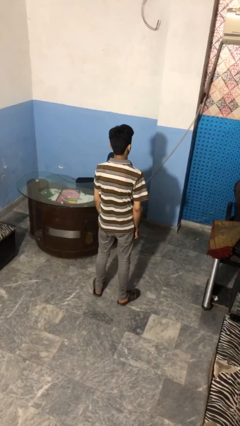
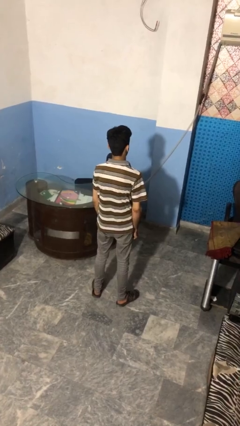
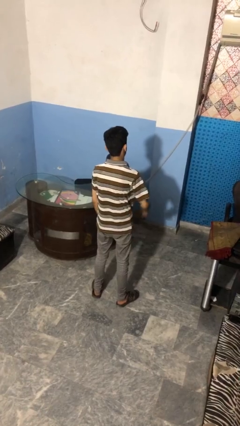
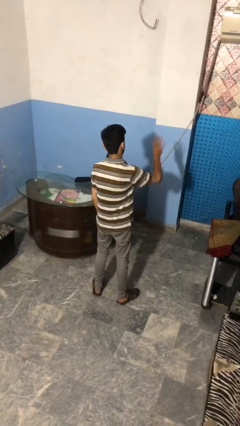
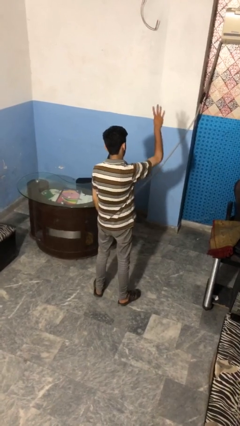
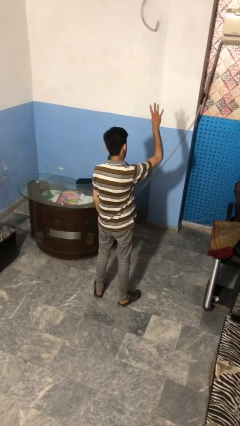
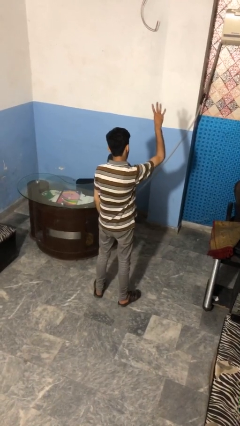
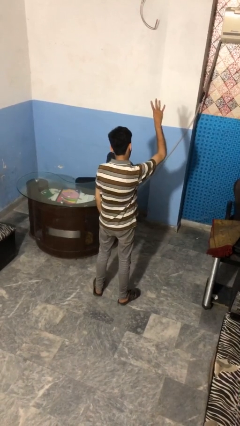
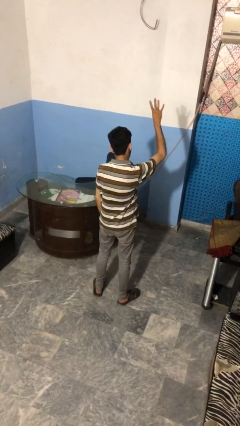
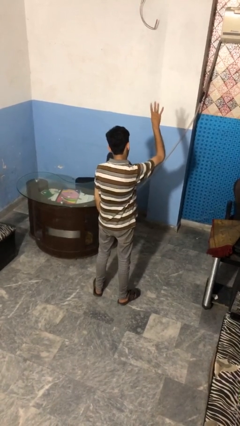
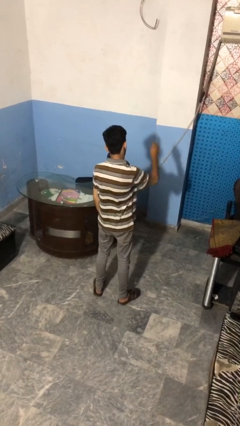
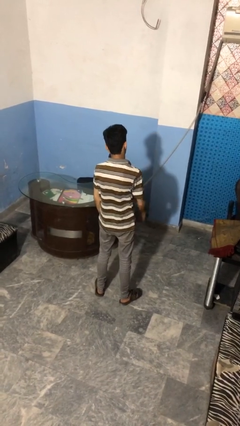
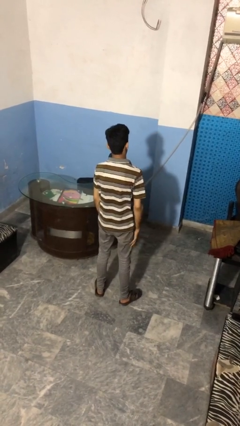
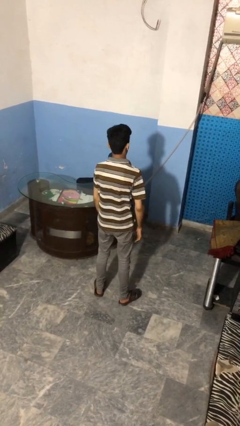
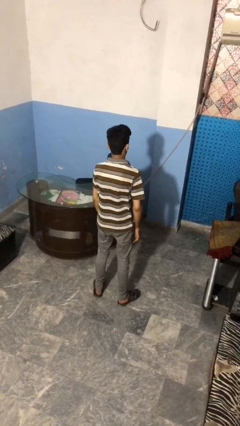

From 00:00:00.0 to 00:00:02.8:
person gestures number four

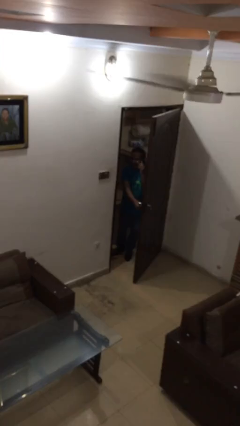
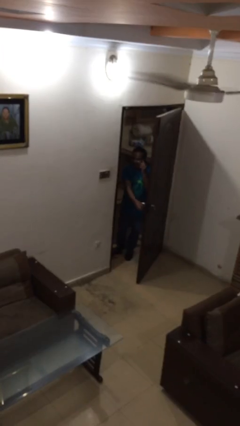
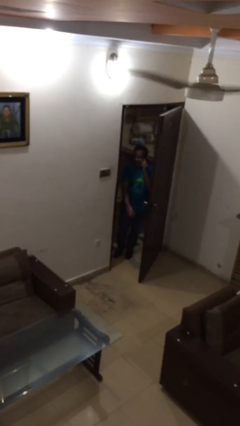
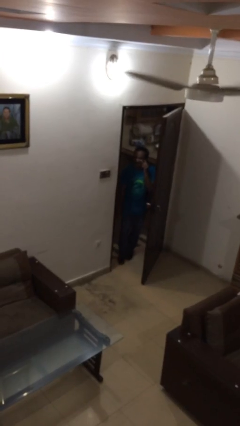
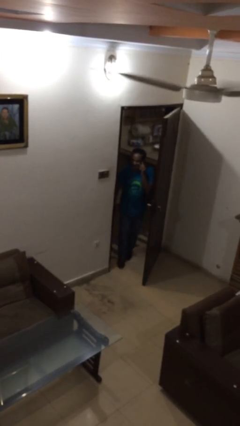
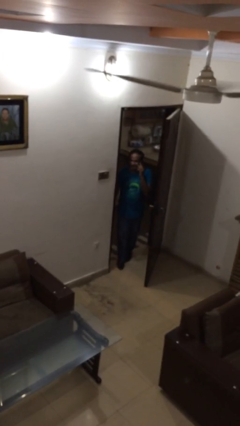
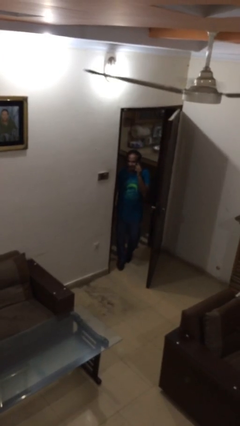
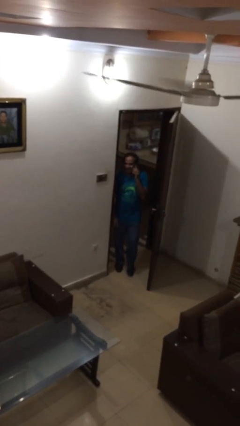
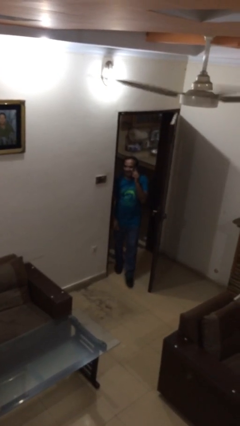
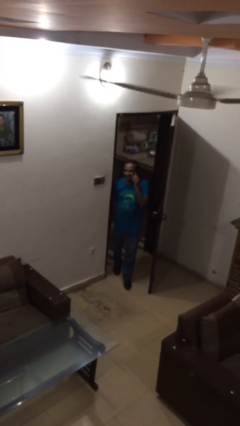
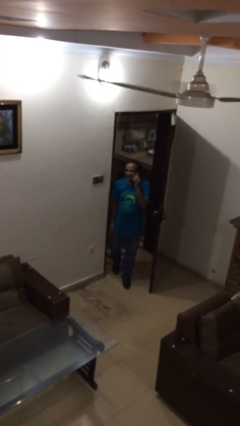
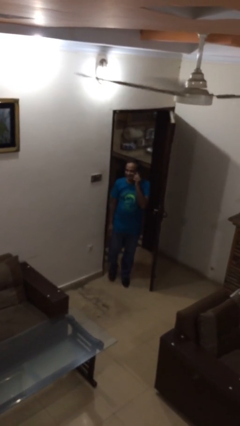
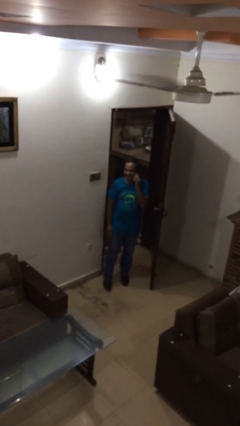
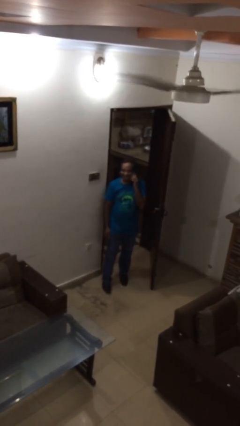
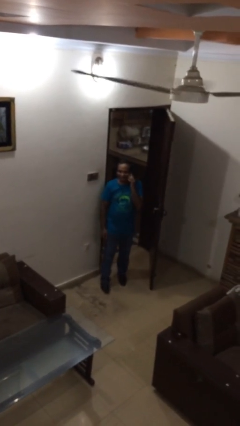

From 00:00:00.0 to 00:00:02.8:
person enters scene through structure

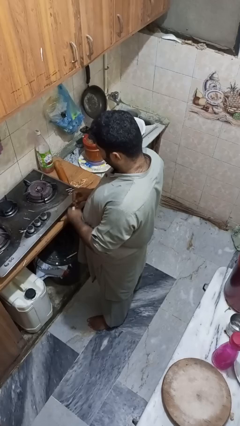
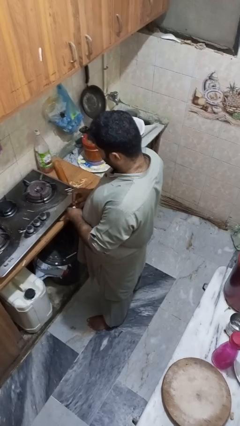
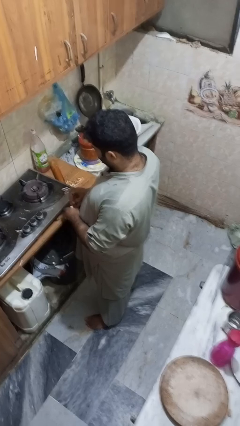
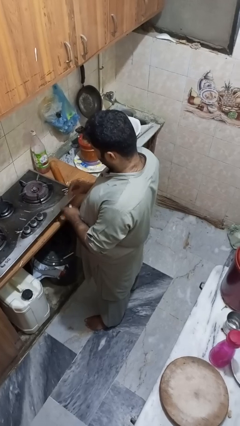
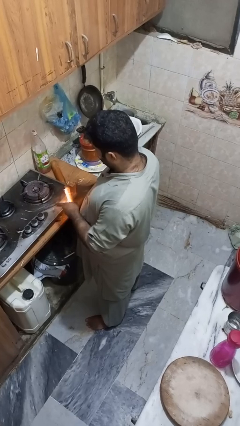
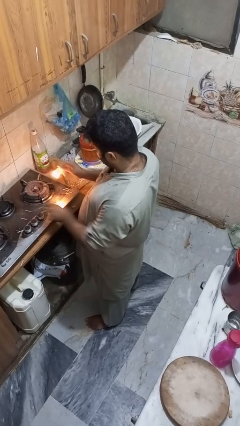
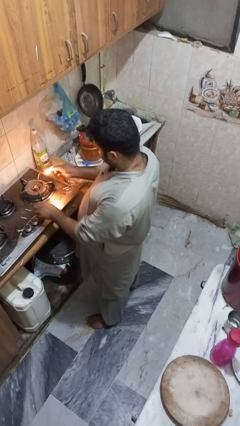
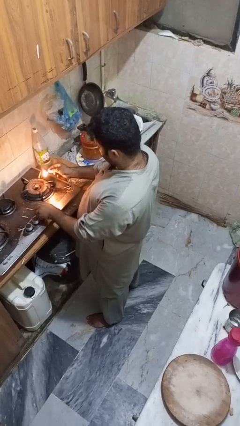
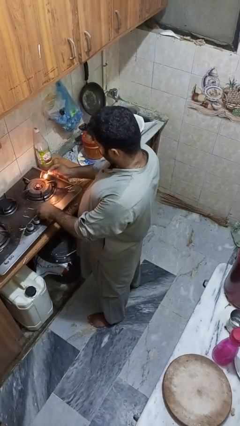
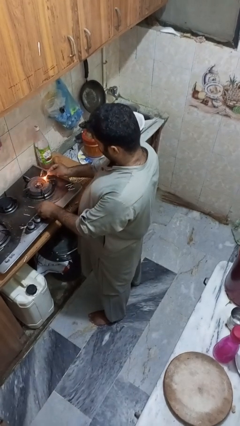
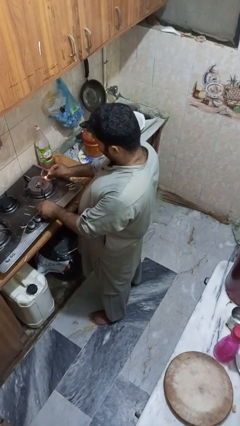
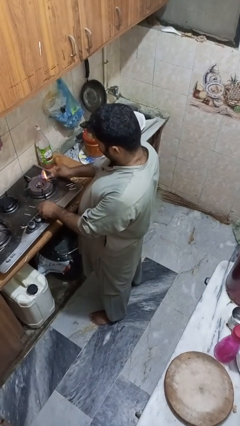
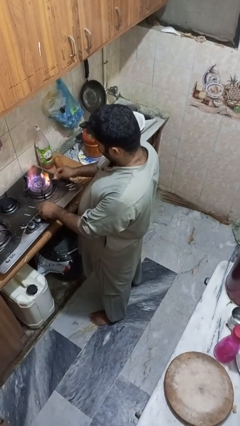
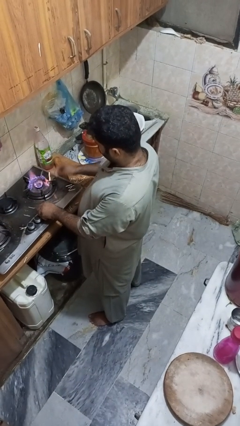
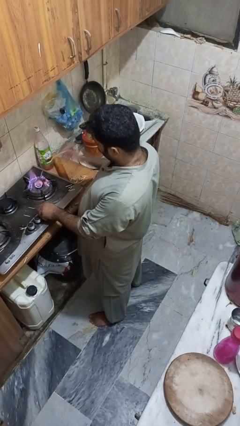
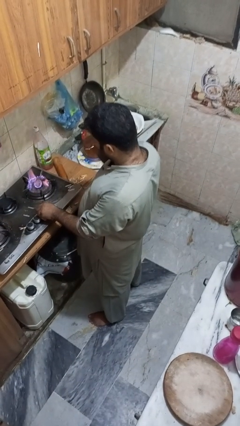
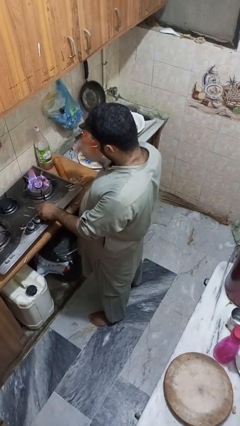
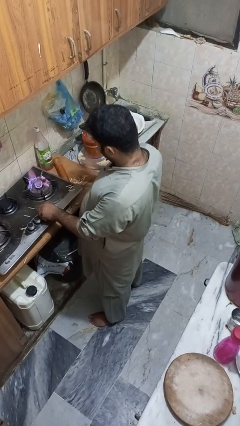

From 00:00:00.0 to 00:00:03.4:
person turns on stovetop

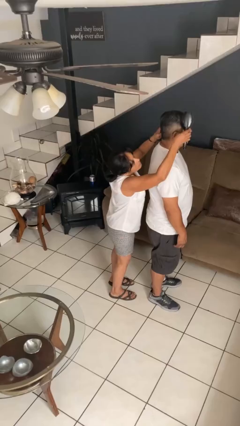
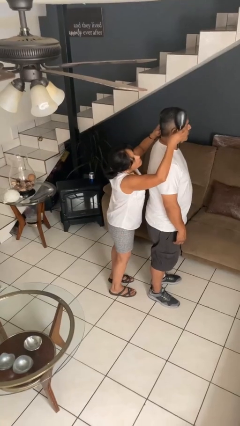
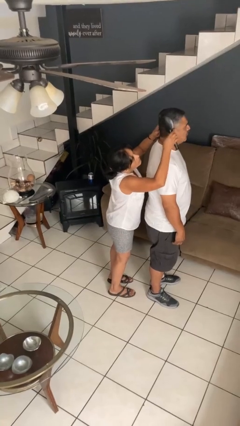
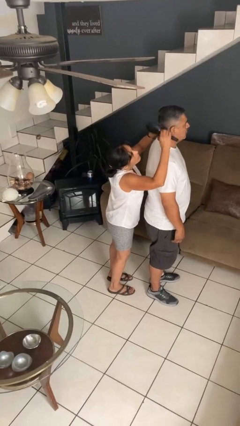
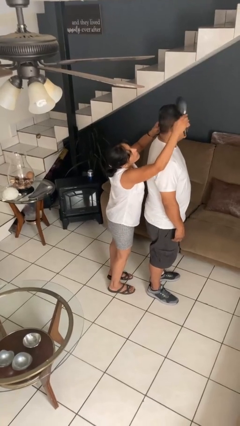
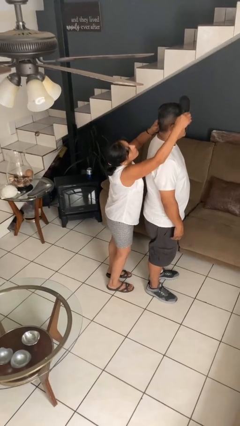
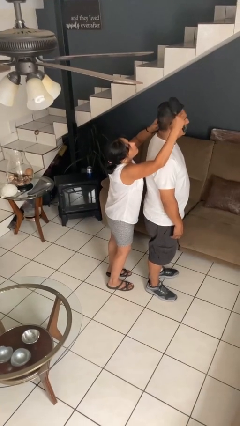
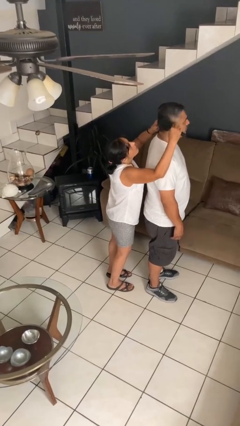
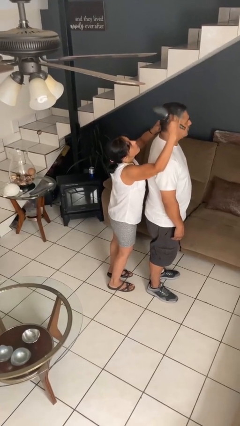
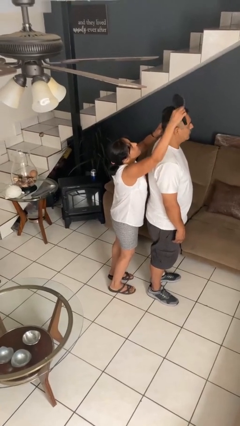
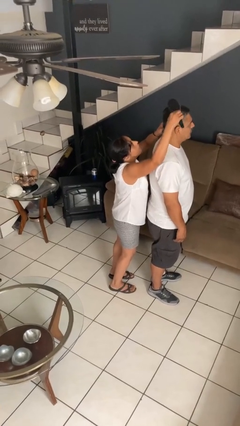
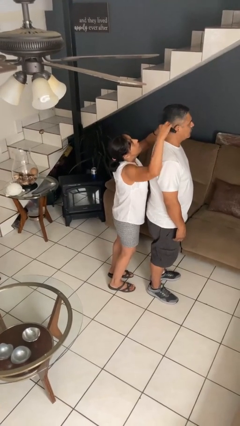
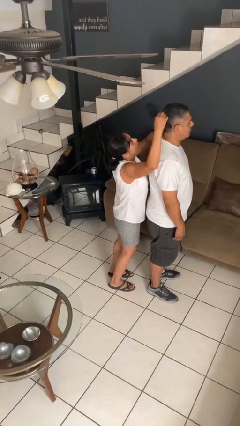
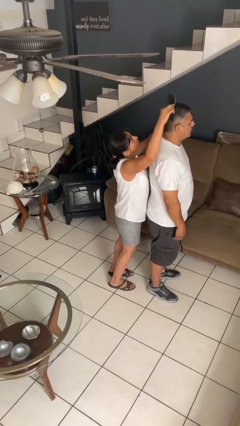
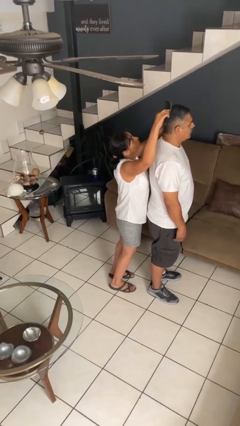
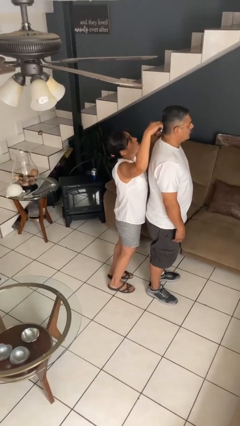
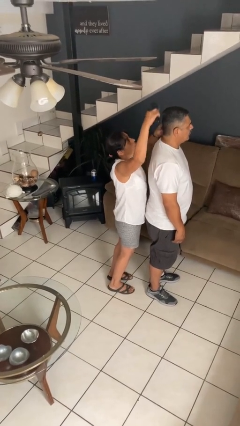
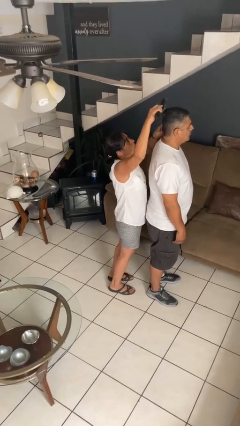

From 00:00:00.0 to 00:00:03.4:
person brushes hair of person

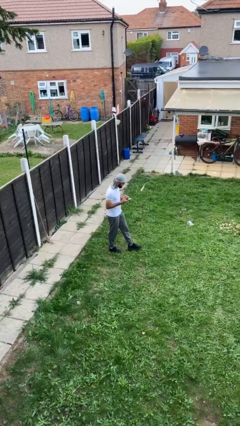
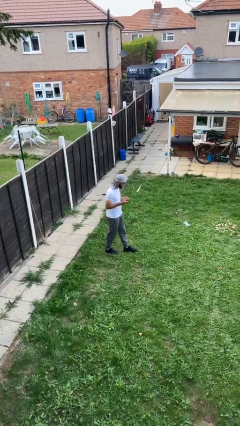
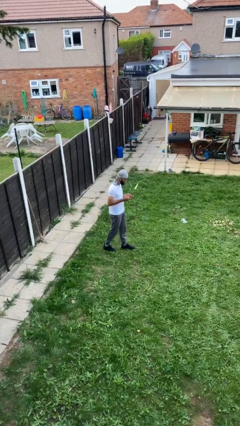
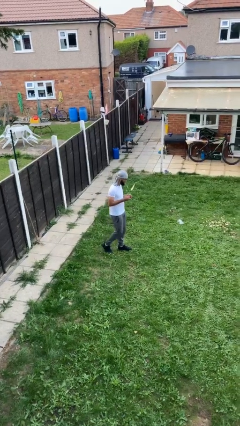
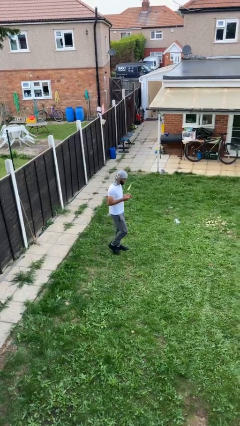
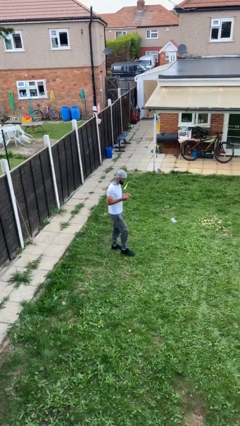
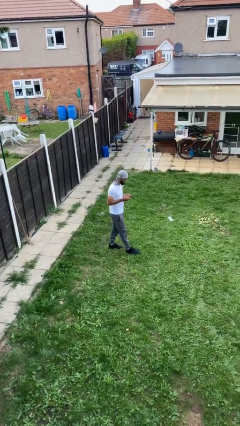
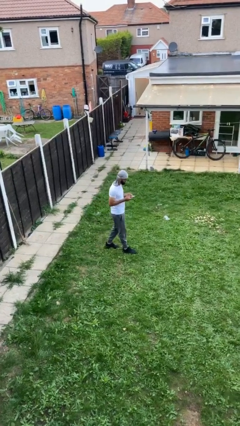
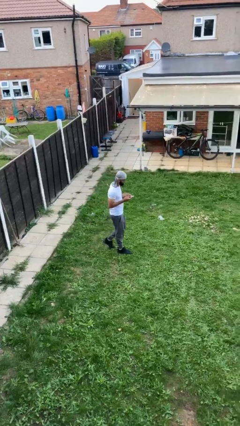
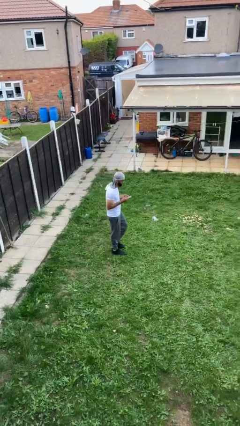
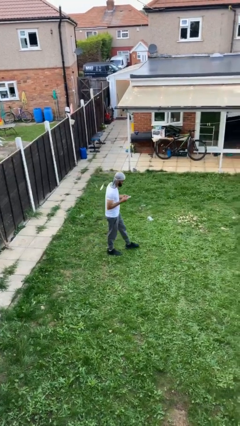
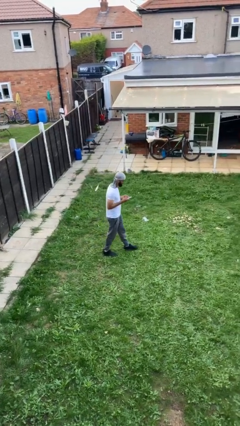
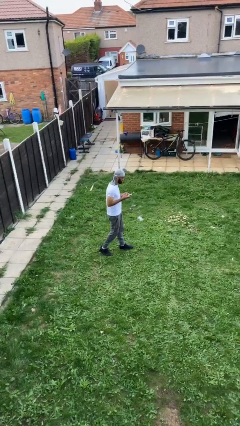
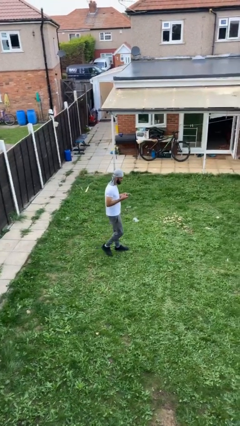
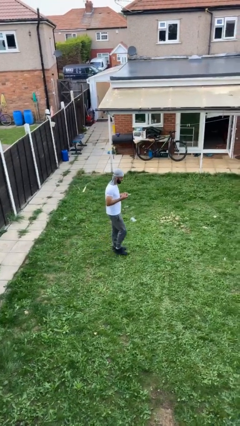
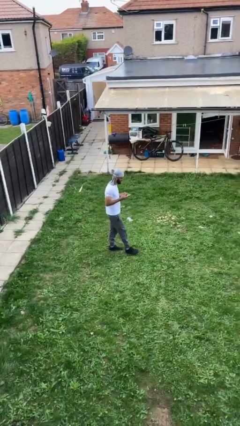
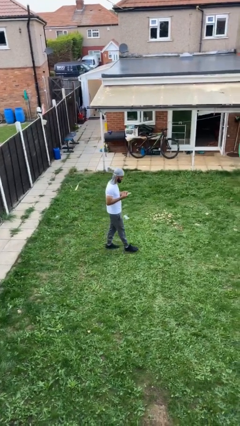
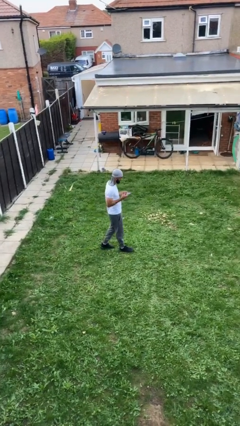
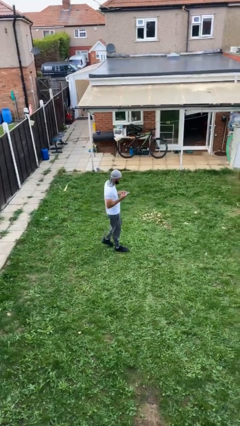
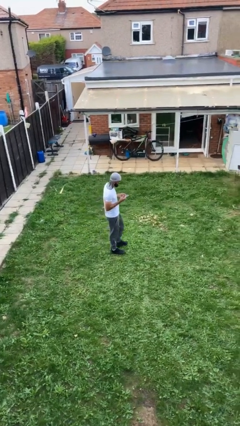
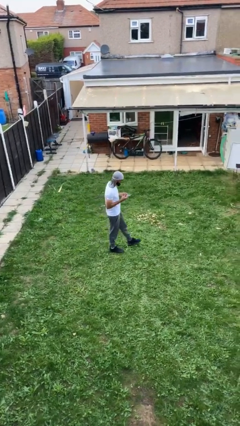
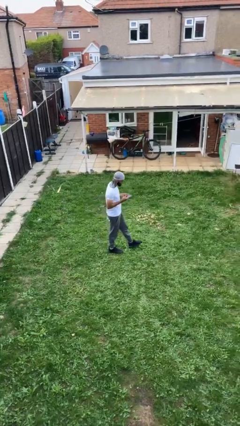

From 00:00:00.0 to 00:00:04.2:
person texts on phone

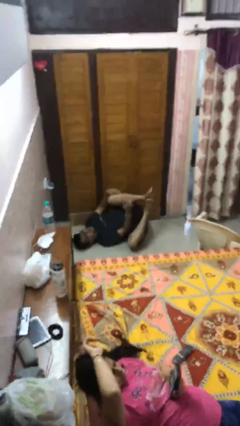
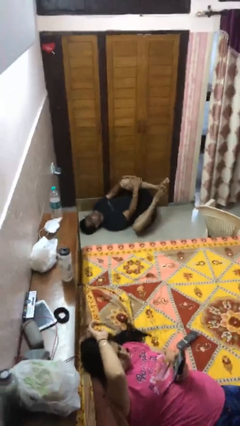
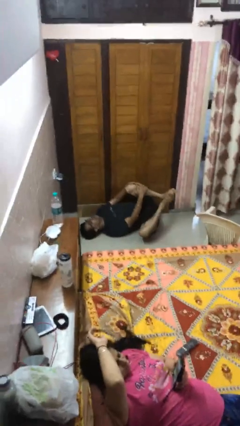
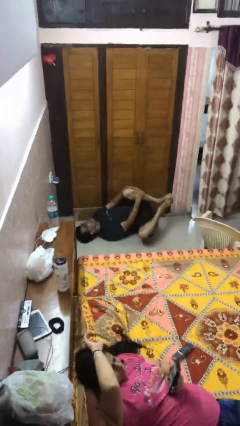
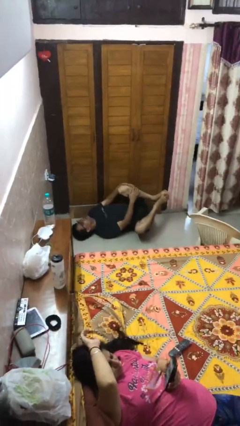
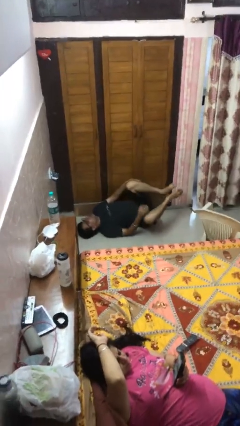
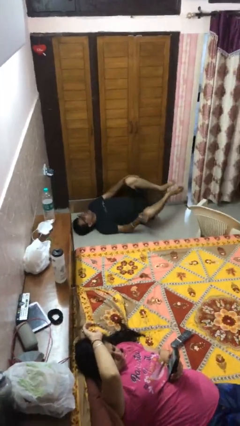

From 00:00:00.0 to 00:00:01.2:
person lies down on floor
